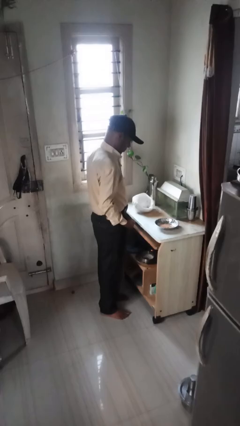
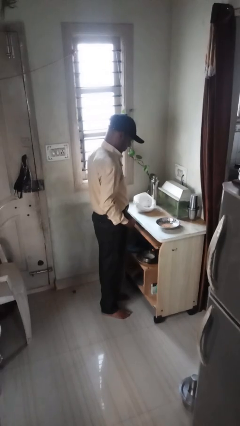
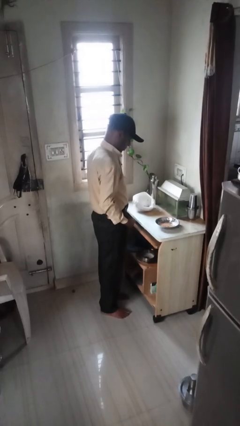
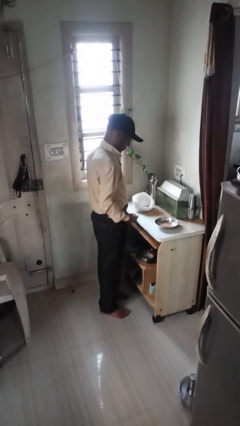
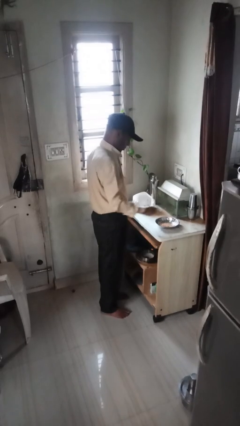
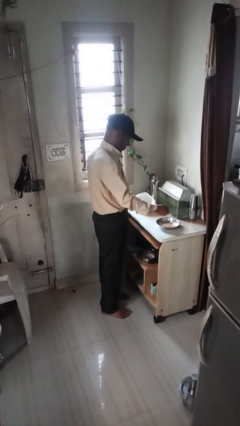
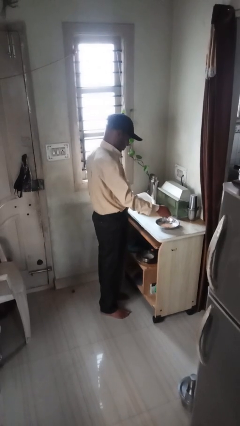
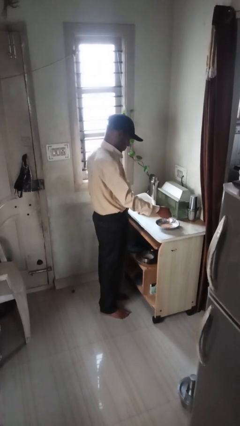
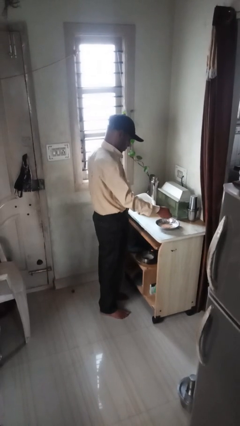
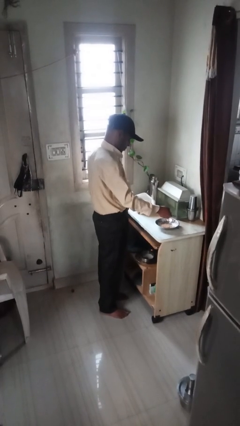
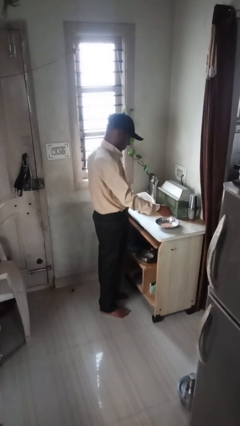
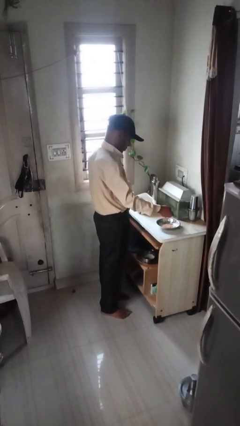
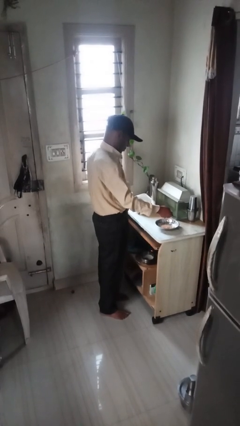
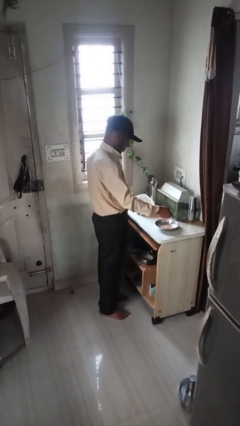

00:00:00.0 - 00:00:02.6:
person pours into bowl

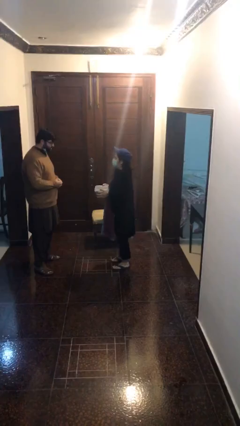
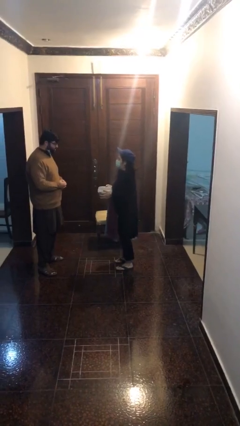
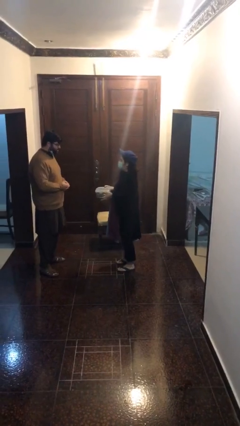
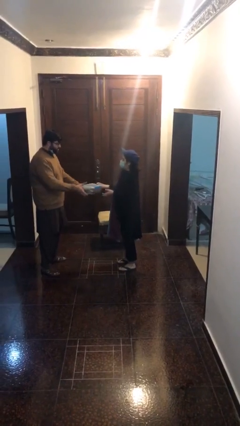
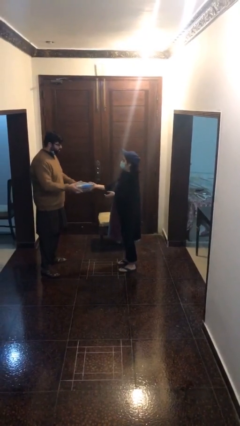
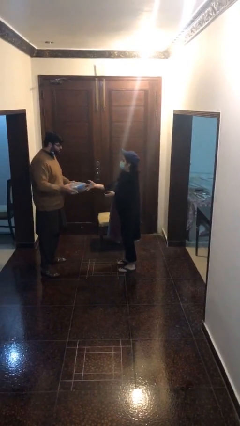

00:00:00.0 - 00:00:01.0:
person transfers object to person

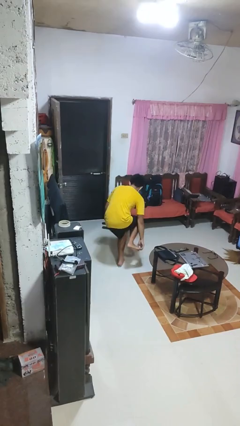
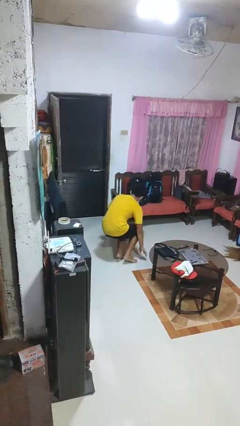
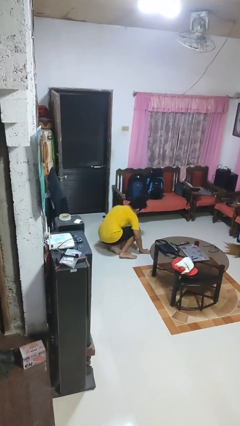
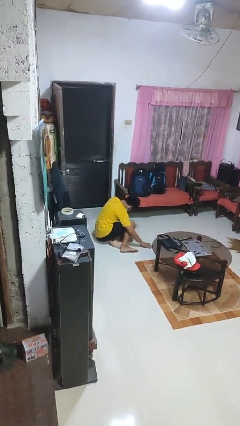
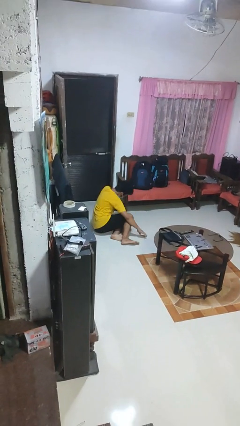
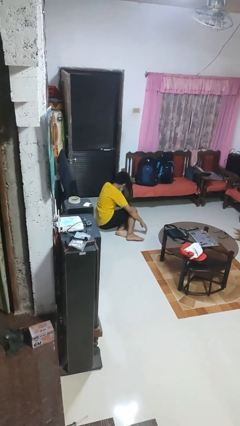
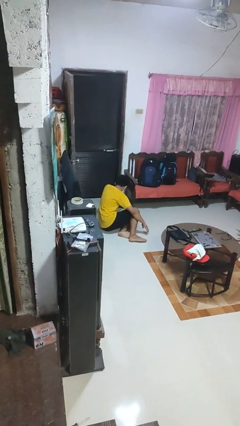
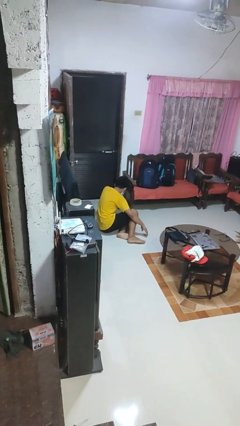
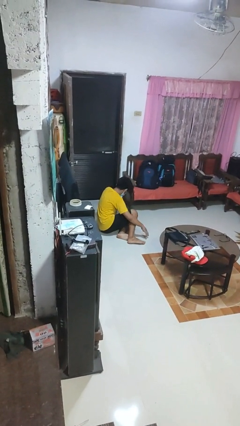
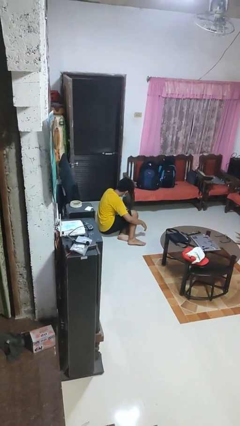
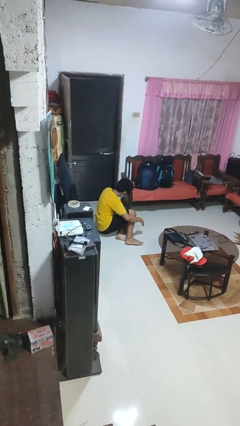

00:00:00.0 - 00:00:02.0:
person lies down on floor

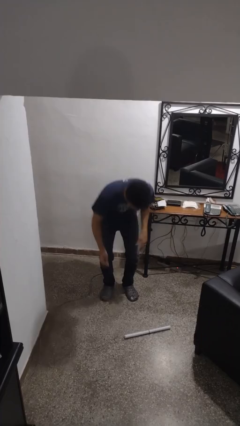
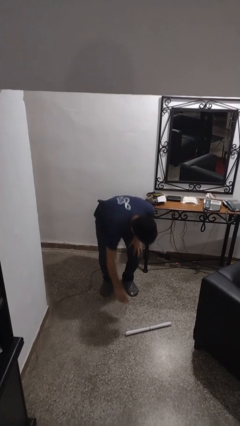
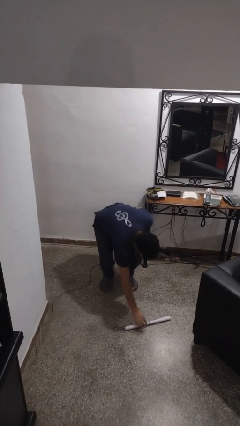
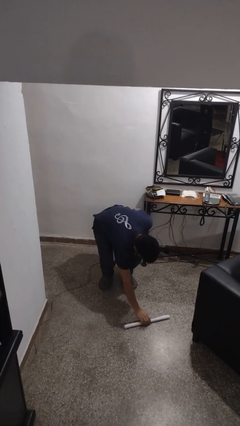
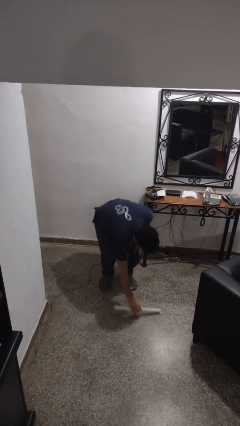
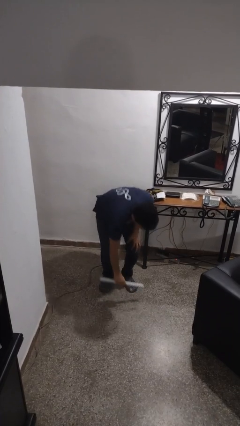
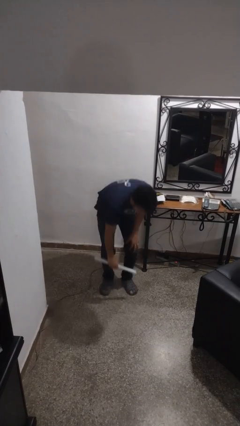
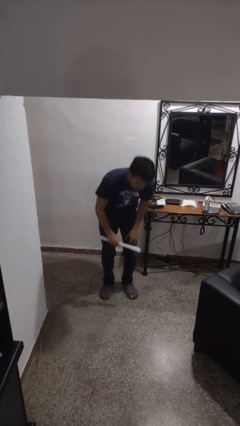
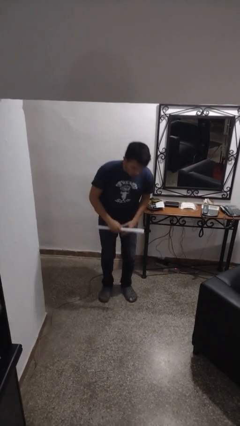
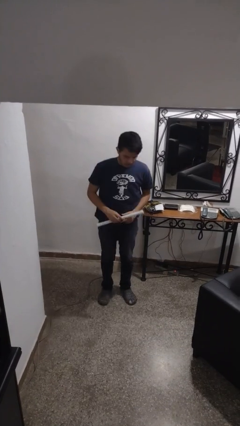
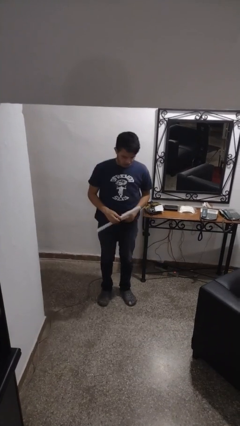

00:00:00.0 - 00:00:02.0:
person picks up object from floor

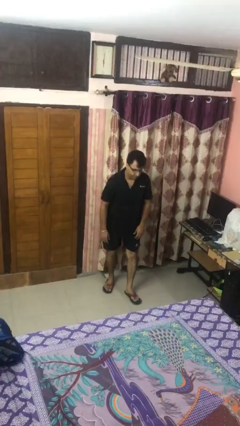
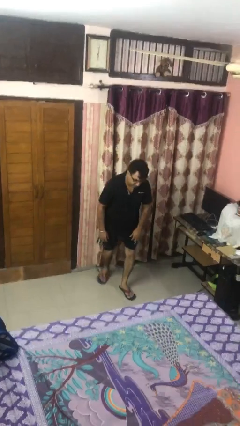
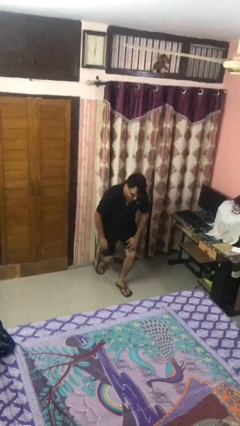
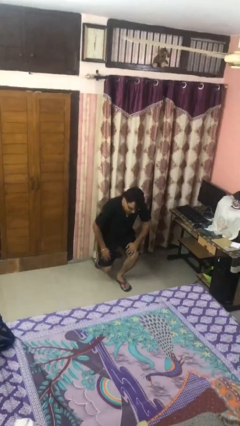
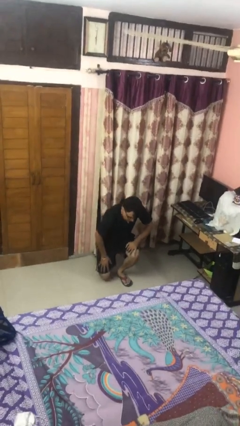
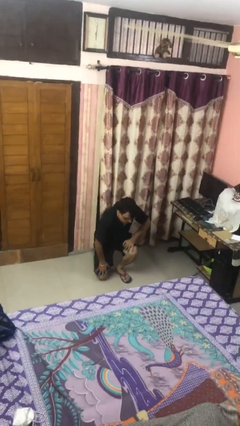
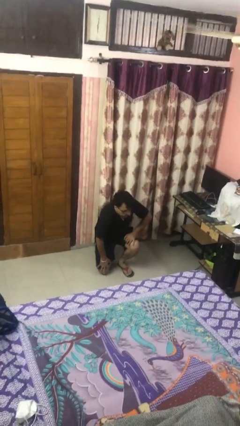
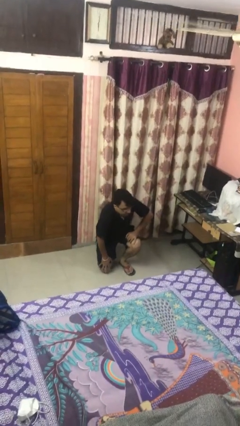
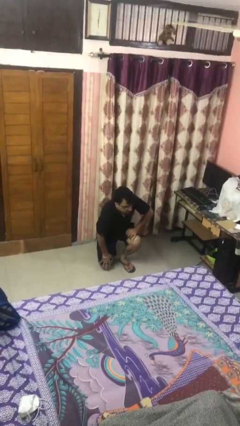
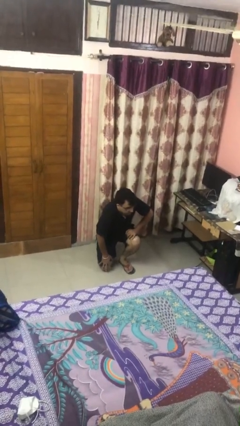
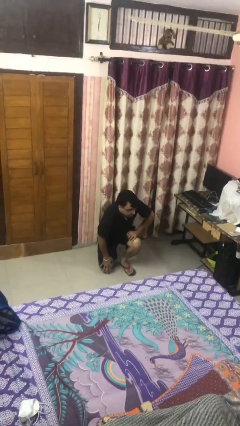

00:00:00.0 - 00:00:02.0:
person kneels

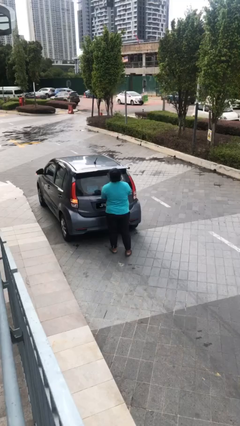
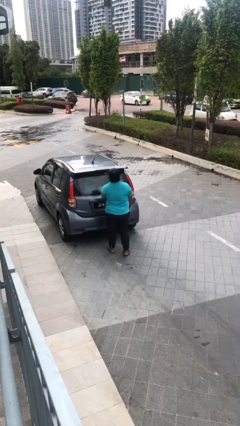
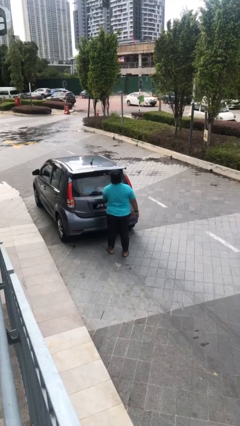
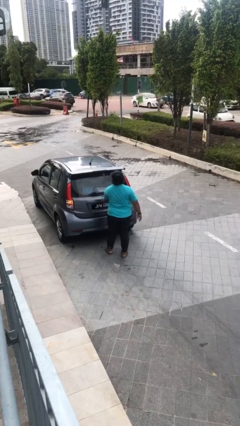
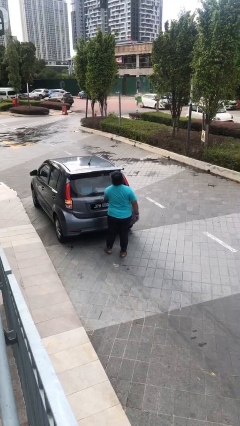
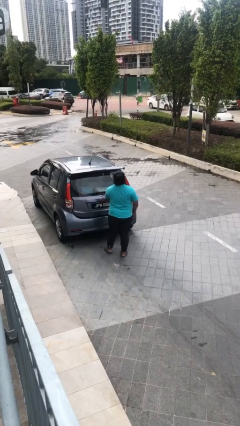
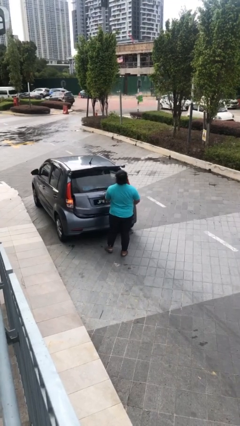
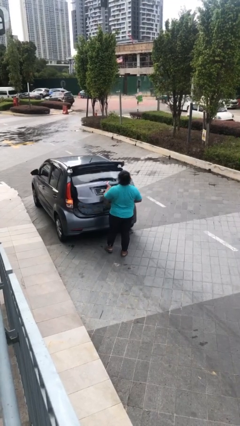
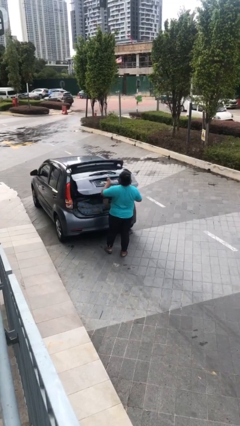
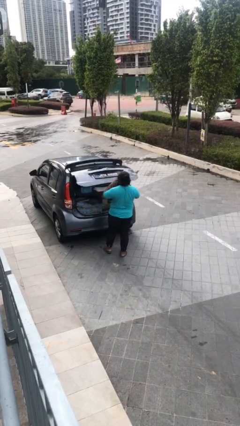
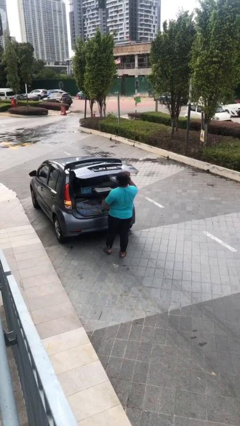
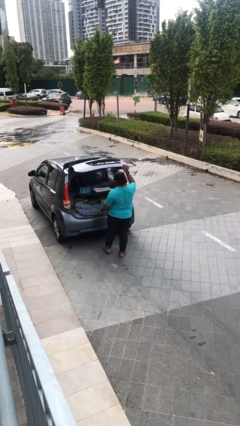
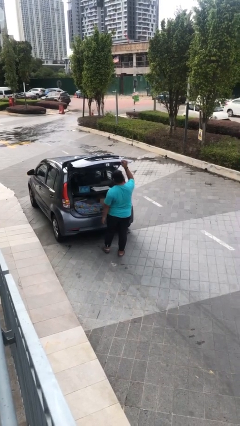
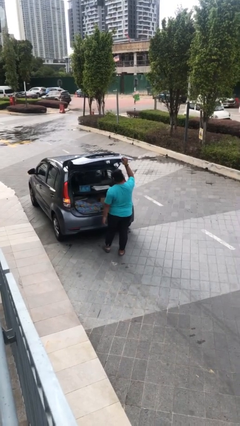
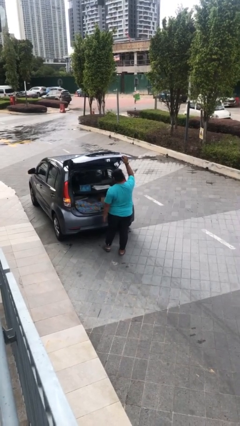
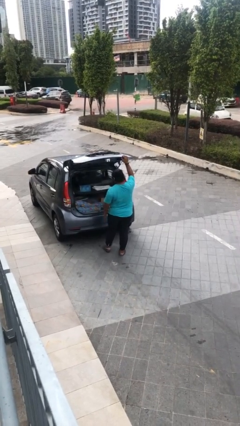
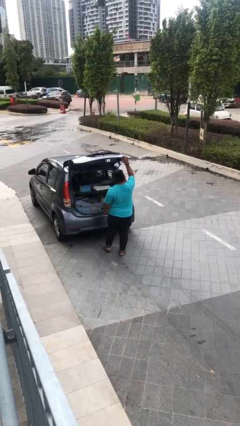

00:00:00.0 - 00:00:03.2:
person opens car trunk

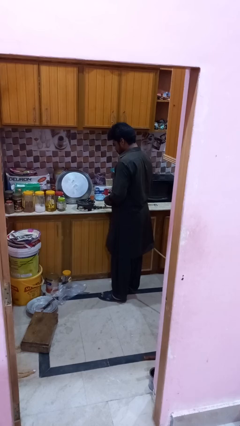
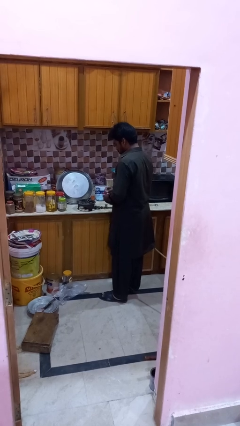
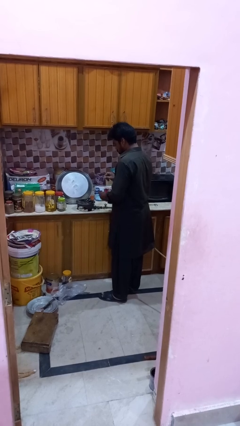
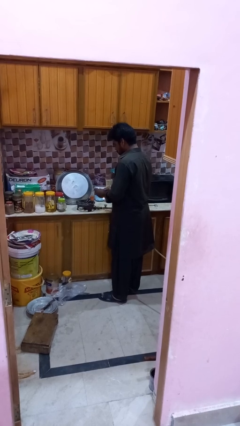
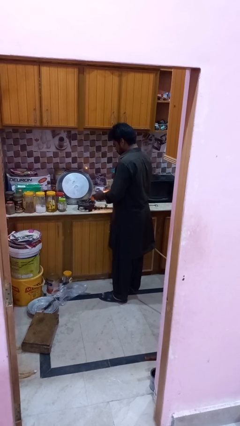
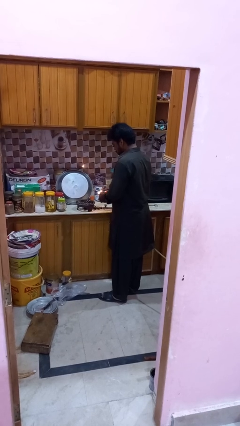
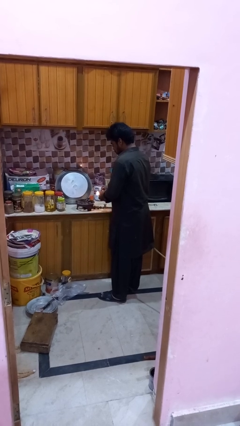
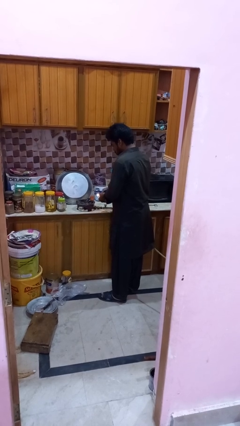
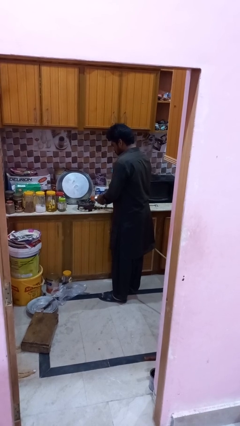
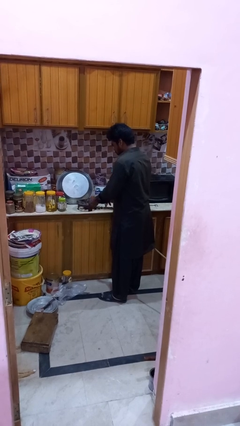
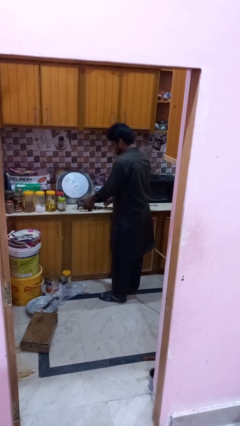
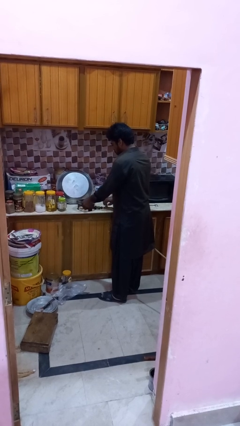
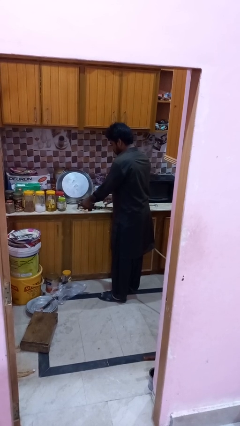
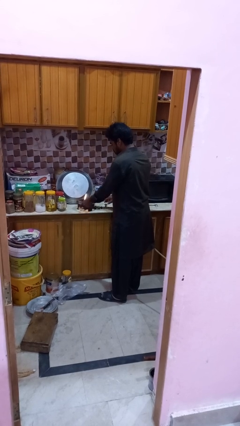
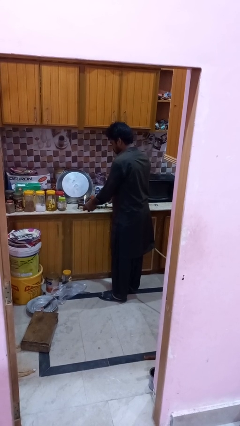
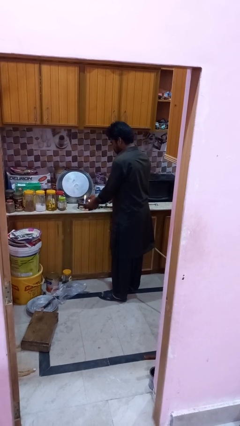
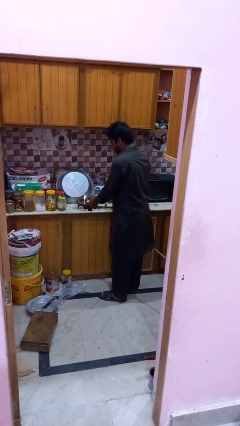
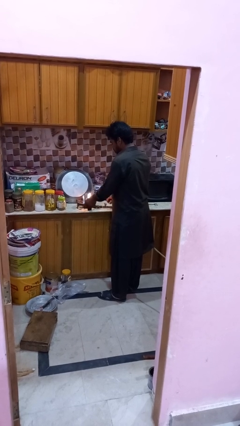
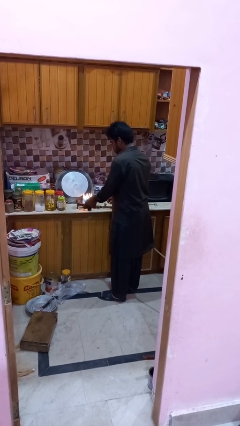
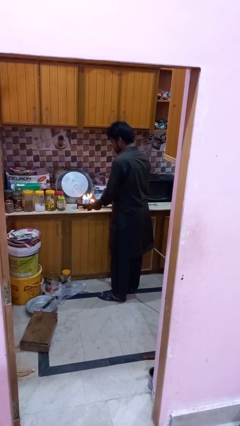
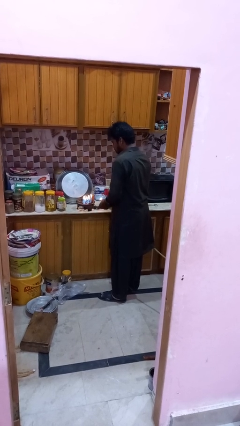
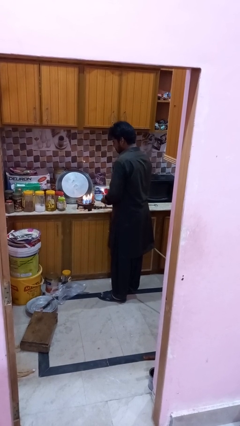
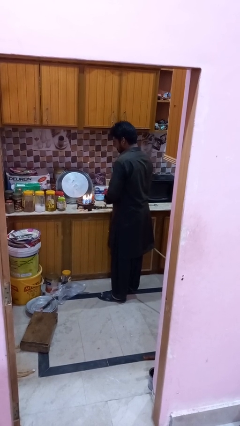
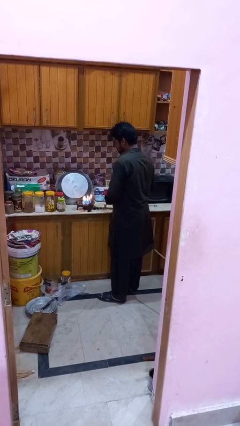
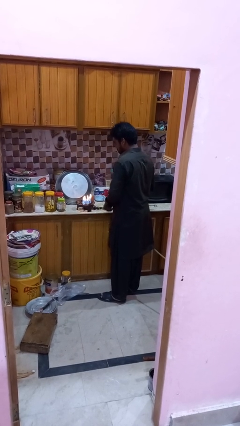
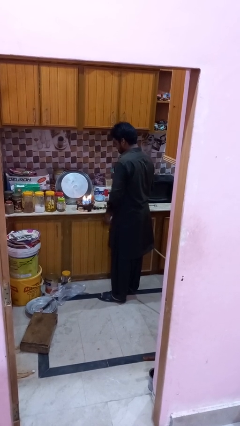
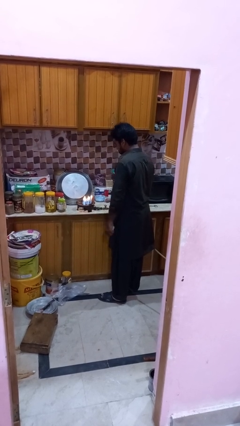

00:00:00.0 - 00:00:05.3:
person turns on stovetop
